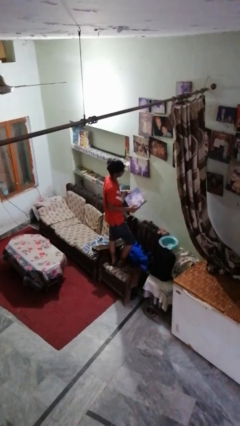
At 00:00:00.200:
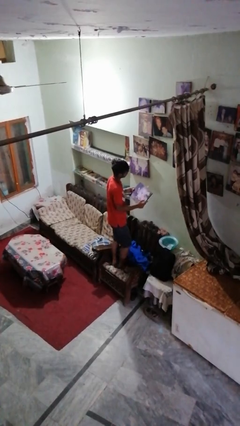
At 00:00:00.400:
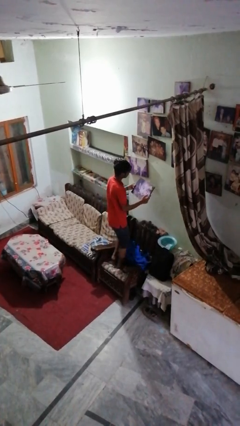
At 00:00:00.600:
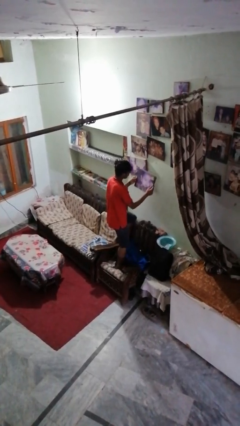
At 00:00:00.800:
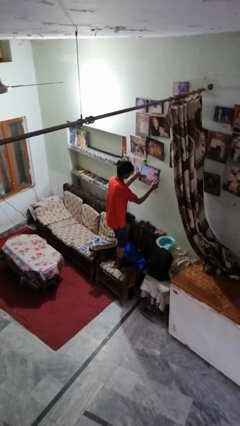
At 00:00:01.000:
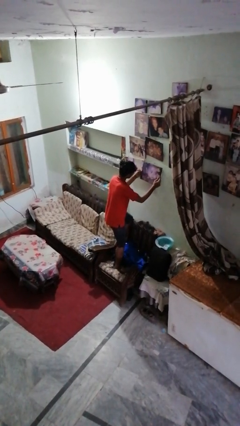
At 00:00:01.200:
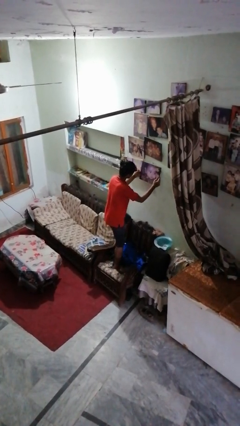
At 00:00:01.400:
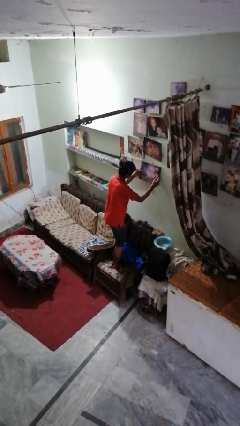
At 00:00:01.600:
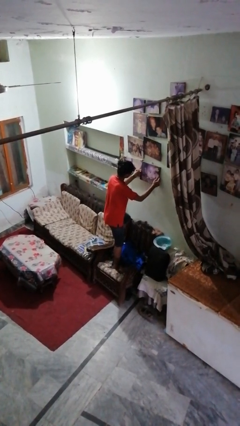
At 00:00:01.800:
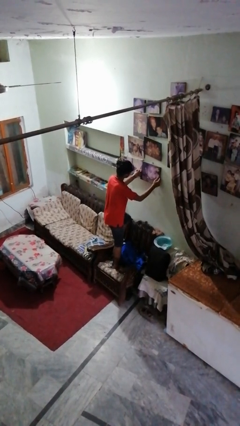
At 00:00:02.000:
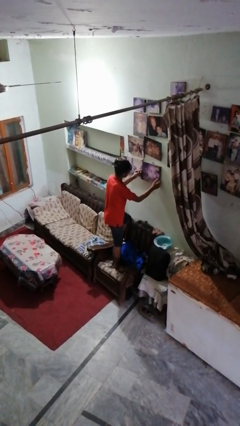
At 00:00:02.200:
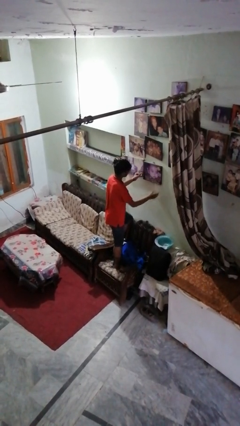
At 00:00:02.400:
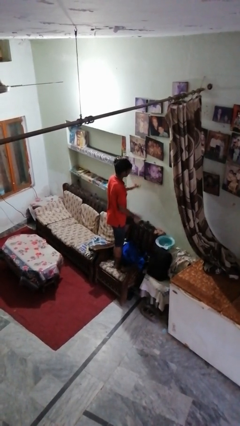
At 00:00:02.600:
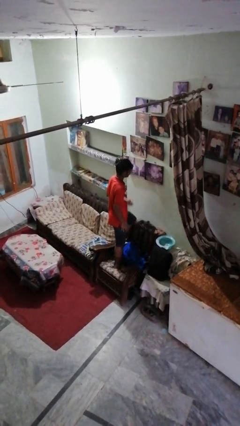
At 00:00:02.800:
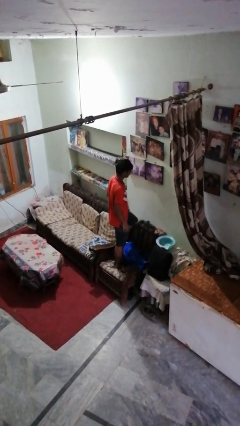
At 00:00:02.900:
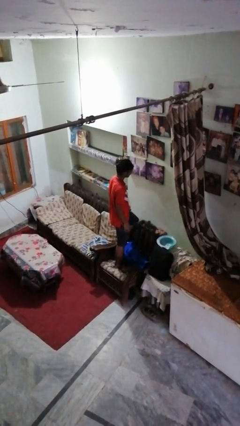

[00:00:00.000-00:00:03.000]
person puts up picture frame

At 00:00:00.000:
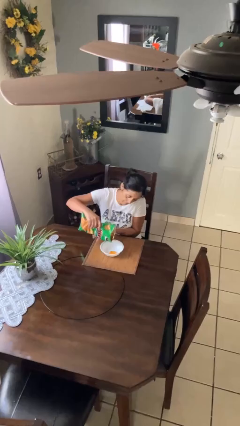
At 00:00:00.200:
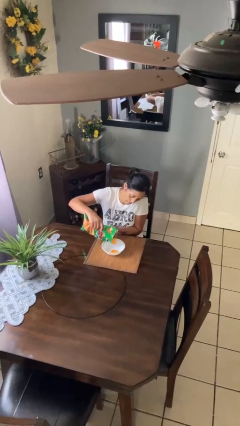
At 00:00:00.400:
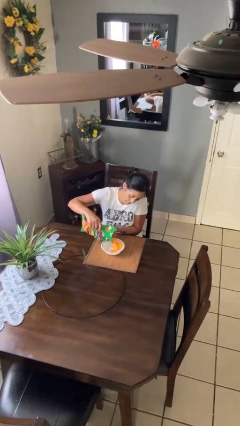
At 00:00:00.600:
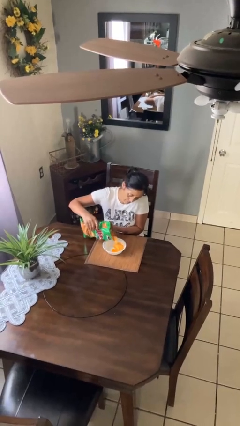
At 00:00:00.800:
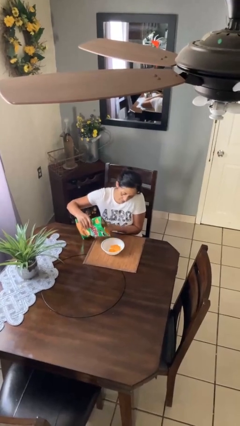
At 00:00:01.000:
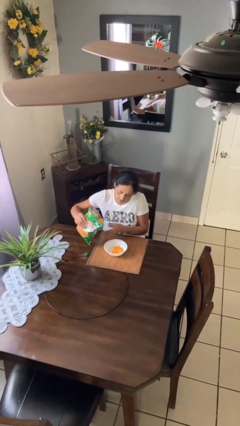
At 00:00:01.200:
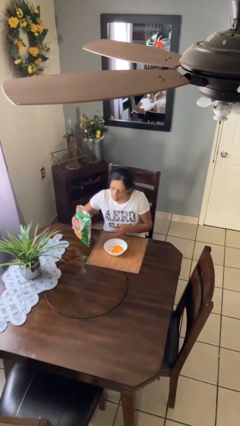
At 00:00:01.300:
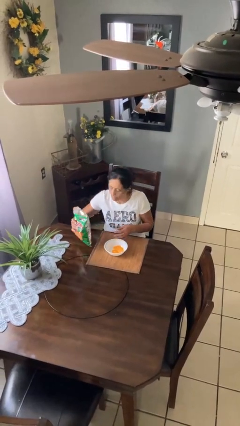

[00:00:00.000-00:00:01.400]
person pours into bowl

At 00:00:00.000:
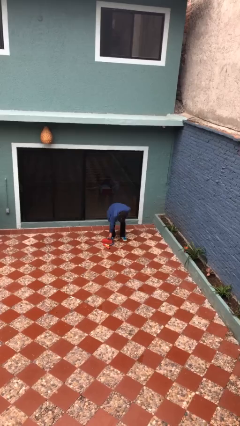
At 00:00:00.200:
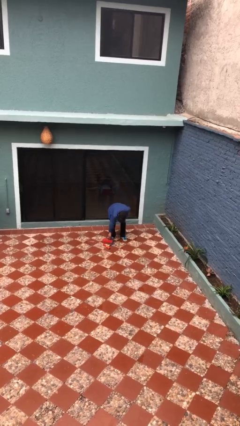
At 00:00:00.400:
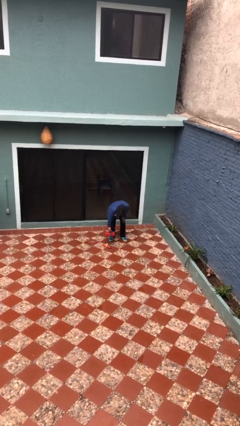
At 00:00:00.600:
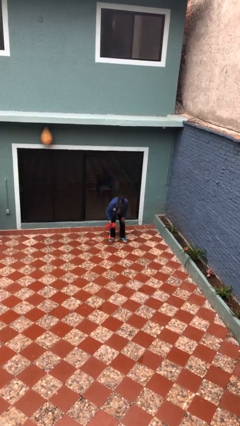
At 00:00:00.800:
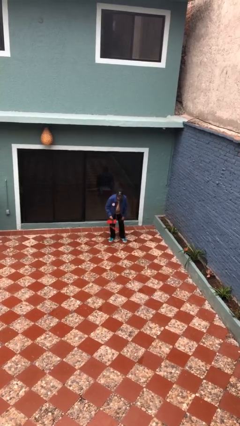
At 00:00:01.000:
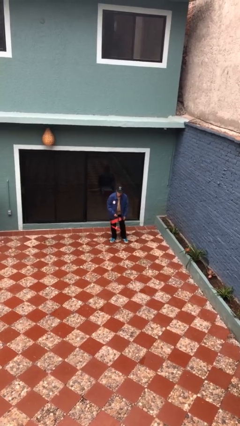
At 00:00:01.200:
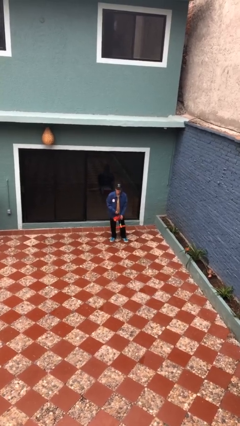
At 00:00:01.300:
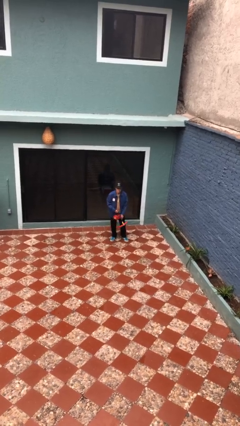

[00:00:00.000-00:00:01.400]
person picks up object from floor

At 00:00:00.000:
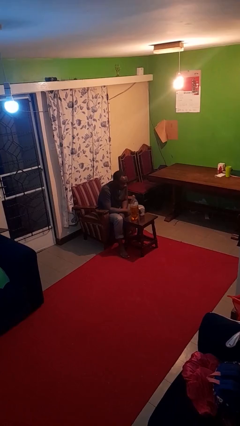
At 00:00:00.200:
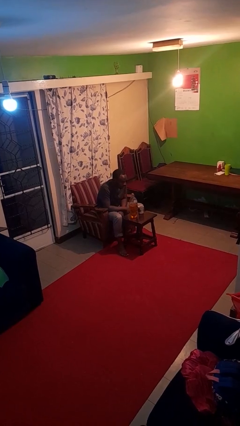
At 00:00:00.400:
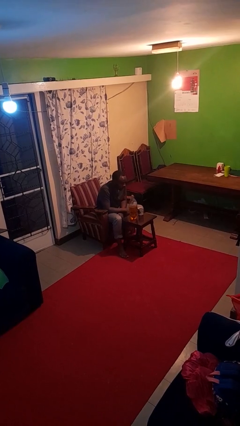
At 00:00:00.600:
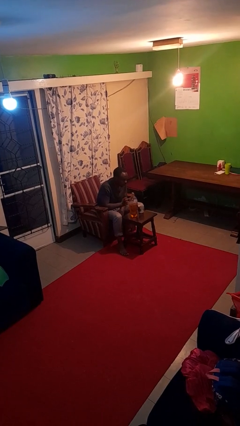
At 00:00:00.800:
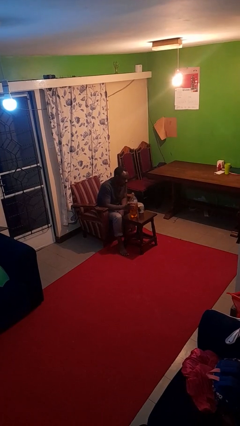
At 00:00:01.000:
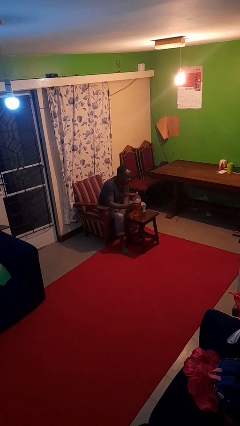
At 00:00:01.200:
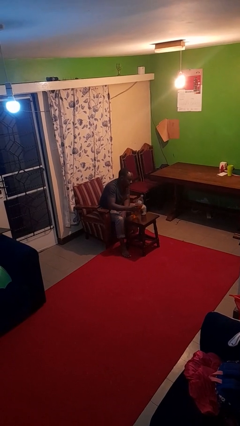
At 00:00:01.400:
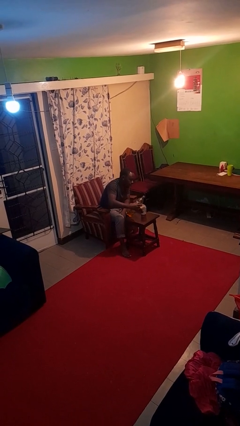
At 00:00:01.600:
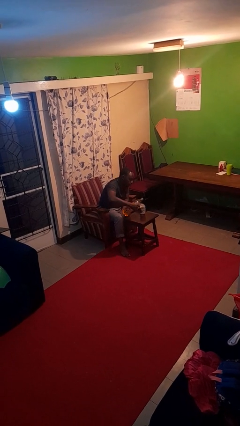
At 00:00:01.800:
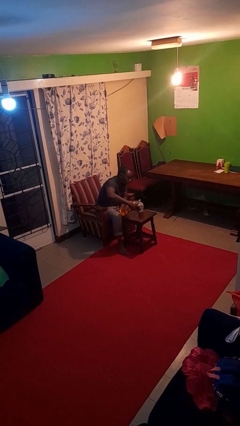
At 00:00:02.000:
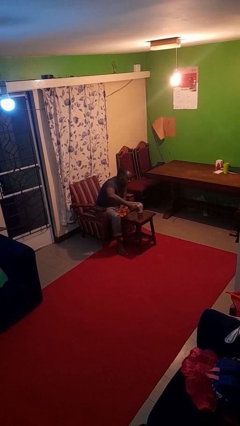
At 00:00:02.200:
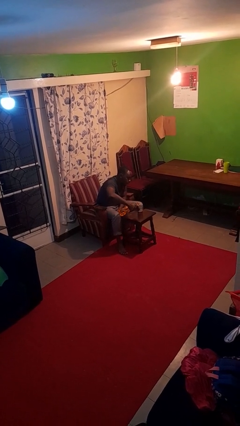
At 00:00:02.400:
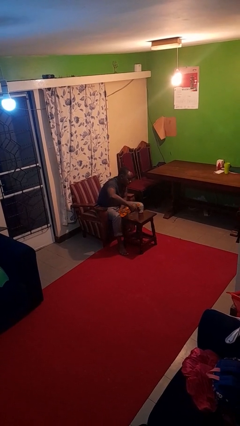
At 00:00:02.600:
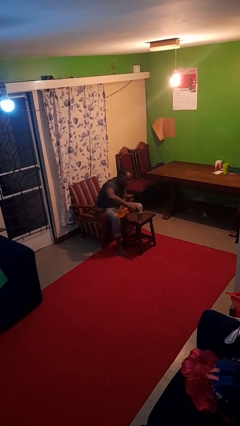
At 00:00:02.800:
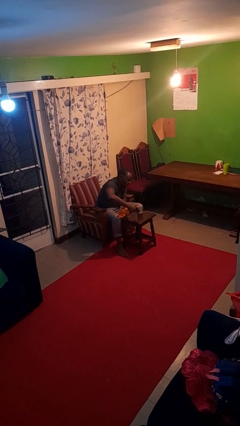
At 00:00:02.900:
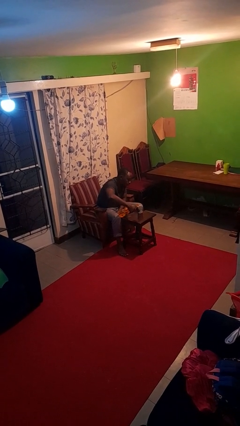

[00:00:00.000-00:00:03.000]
person pours liquid into cup

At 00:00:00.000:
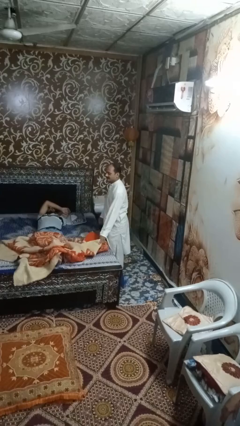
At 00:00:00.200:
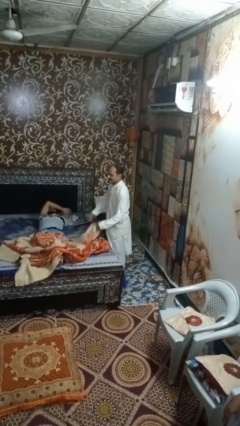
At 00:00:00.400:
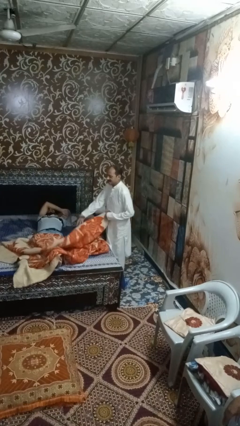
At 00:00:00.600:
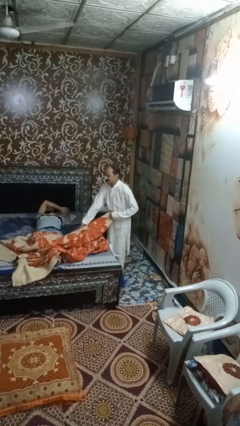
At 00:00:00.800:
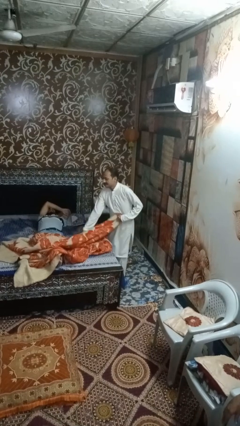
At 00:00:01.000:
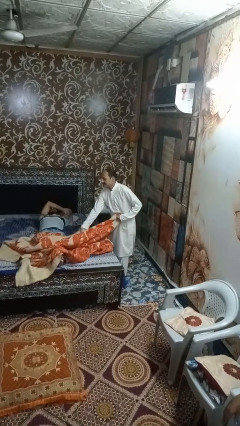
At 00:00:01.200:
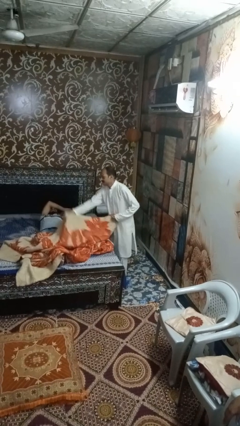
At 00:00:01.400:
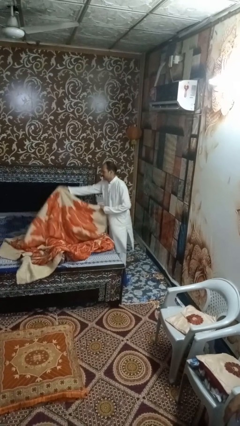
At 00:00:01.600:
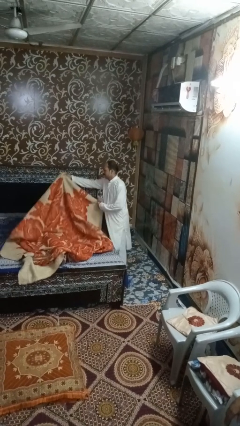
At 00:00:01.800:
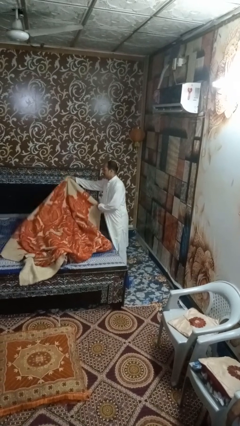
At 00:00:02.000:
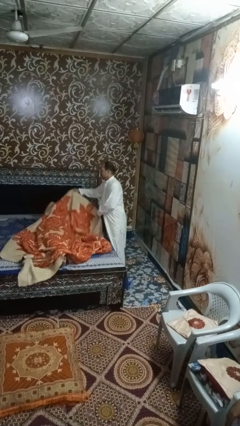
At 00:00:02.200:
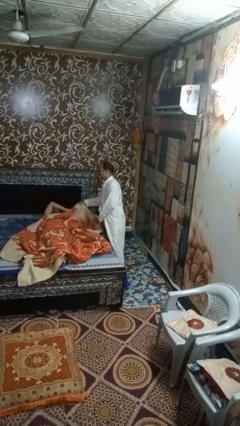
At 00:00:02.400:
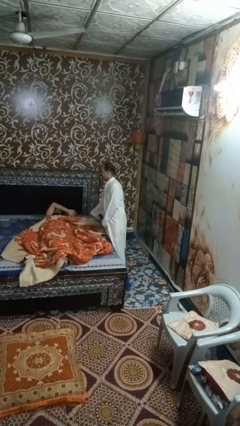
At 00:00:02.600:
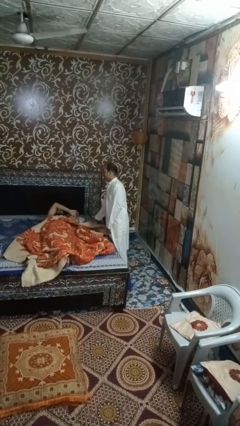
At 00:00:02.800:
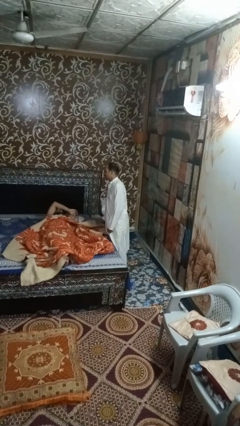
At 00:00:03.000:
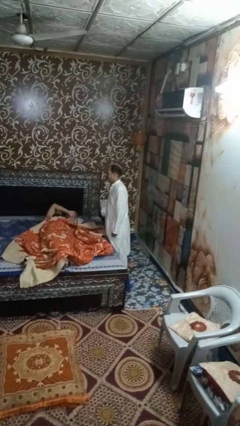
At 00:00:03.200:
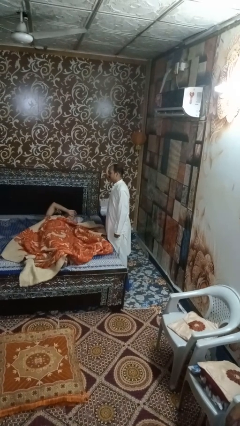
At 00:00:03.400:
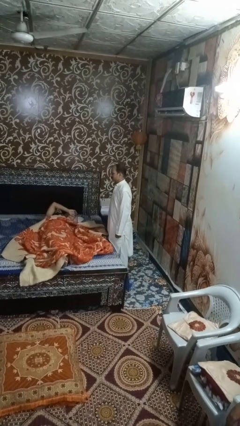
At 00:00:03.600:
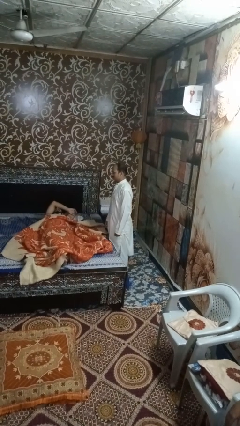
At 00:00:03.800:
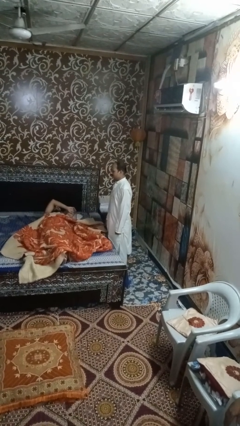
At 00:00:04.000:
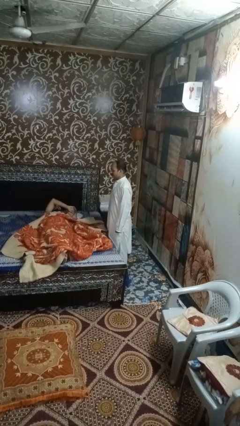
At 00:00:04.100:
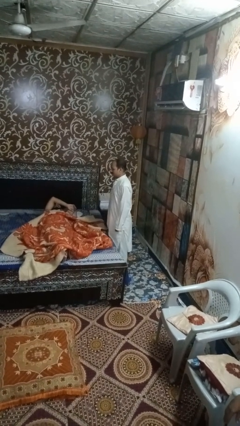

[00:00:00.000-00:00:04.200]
person covers friend with blanket

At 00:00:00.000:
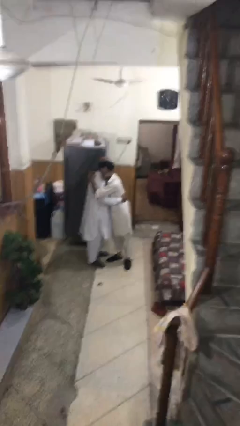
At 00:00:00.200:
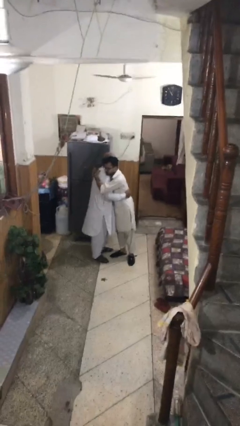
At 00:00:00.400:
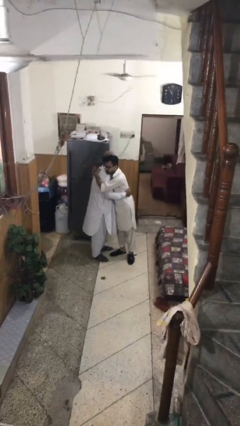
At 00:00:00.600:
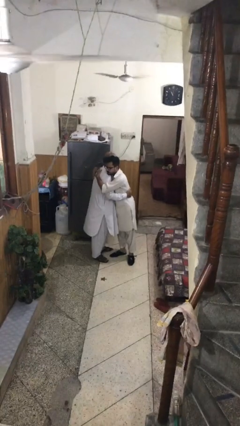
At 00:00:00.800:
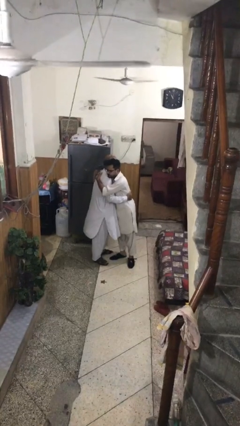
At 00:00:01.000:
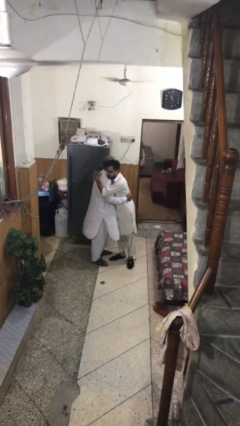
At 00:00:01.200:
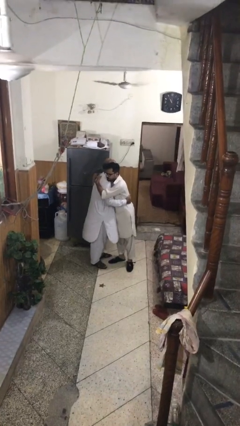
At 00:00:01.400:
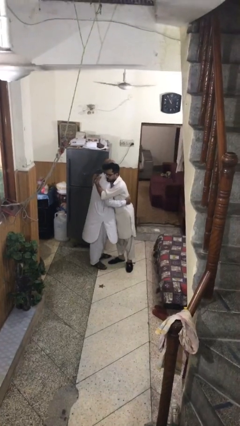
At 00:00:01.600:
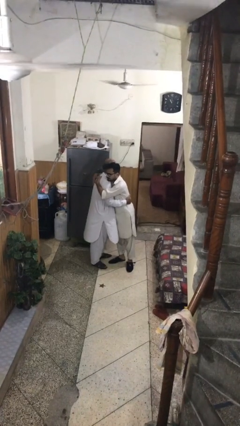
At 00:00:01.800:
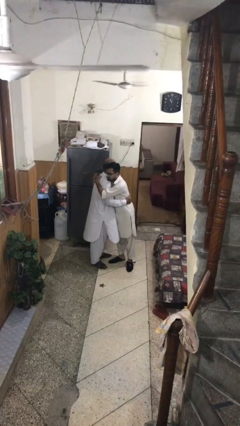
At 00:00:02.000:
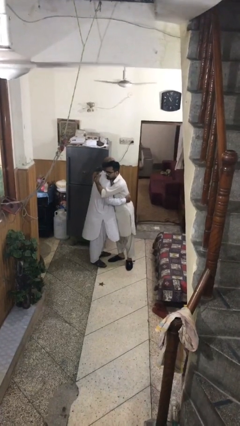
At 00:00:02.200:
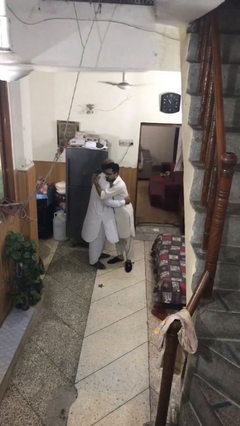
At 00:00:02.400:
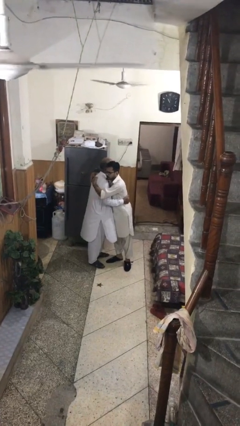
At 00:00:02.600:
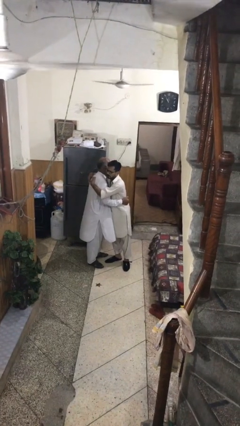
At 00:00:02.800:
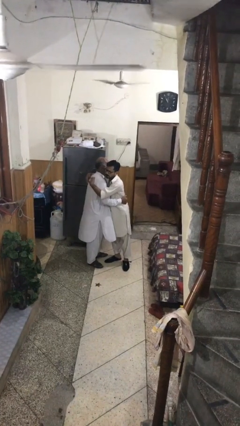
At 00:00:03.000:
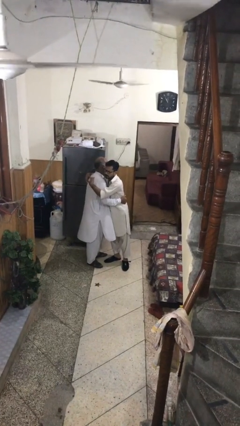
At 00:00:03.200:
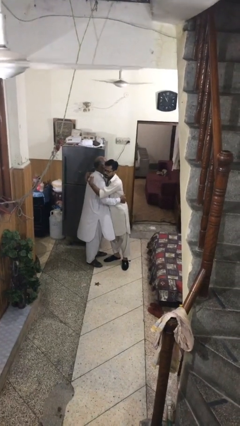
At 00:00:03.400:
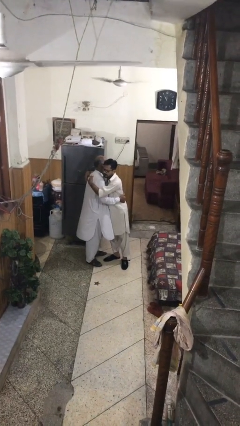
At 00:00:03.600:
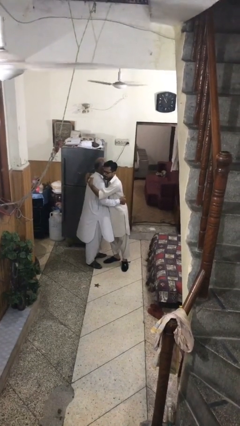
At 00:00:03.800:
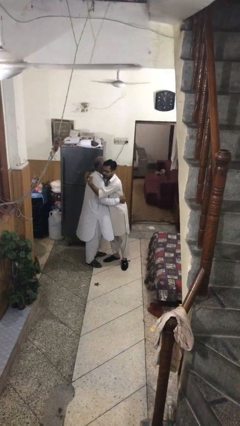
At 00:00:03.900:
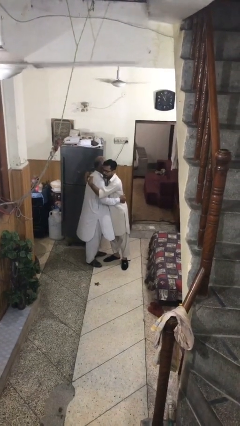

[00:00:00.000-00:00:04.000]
person embraces person
